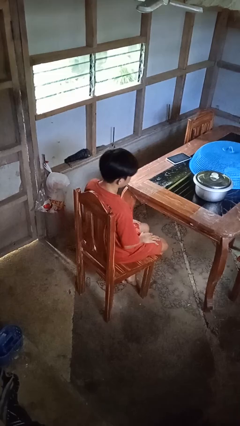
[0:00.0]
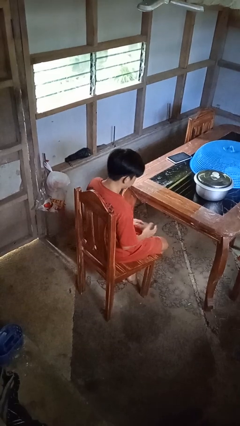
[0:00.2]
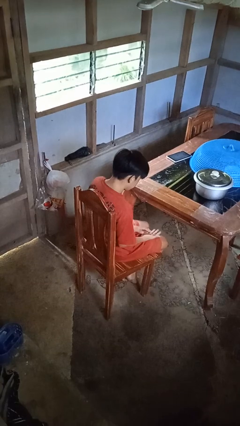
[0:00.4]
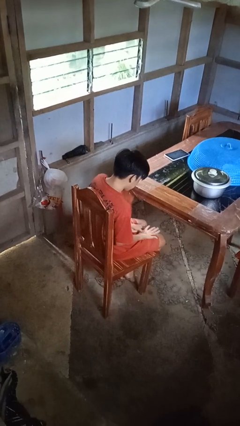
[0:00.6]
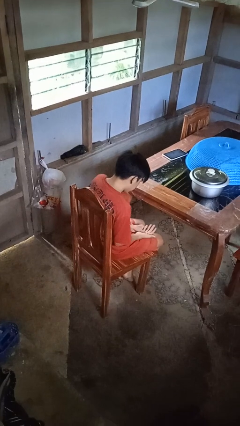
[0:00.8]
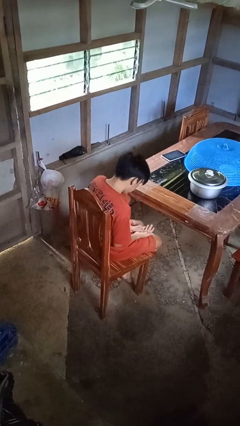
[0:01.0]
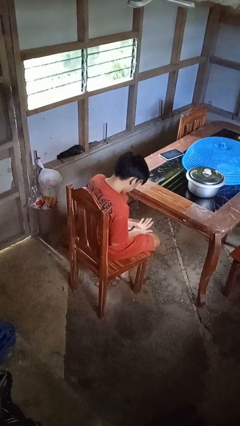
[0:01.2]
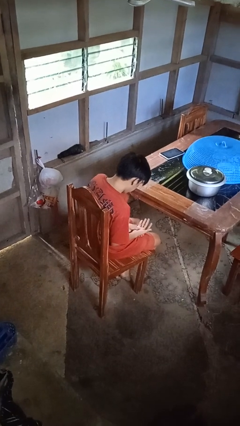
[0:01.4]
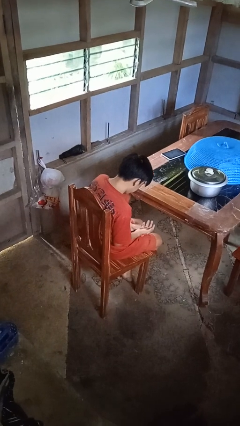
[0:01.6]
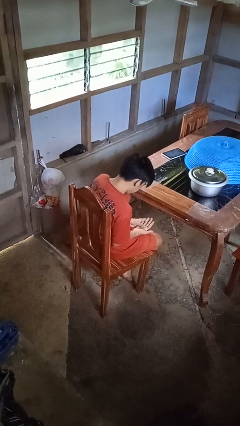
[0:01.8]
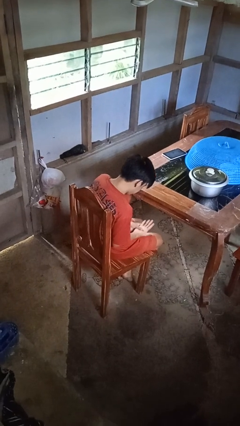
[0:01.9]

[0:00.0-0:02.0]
person looks at hands in lap

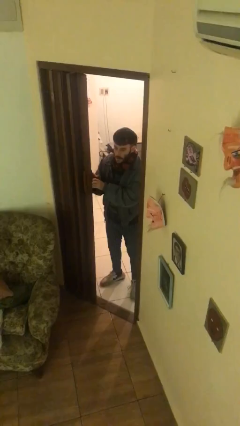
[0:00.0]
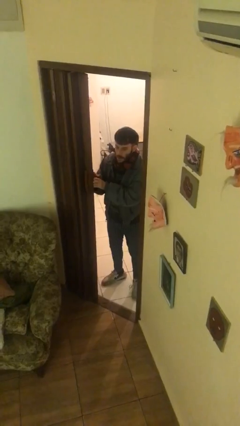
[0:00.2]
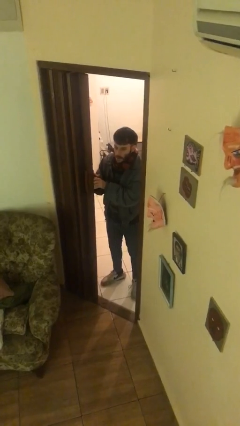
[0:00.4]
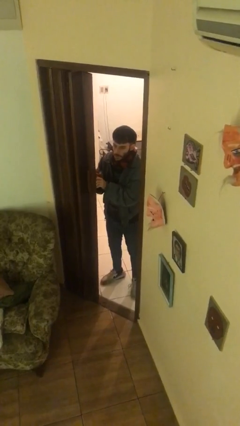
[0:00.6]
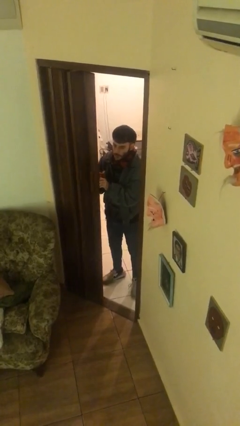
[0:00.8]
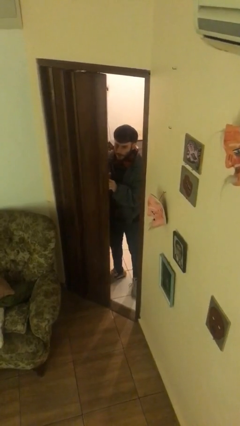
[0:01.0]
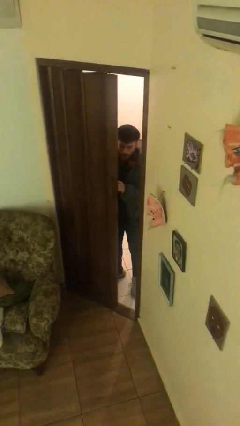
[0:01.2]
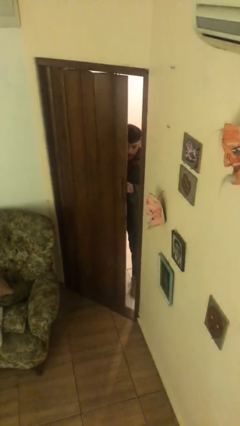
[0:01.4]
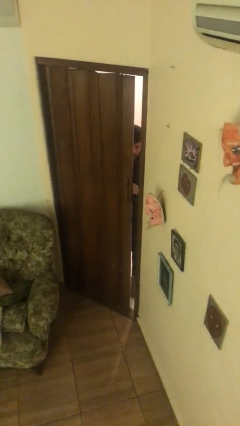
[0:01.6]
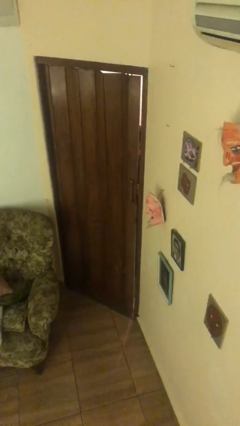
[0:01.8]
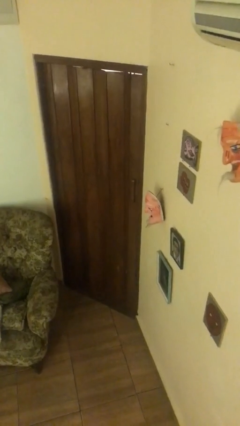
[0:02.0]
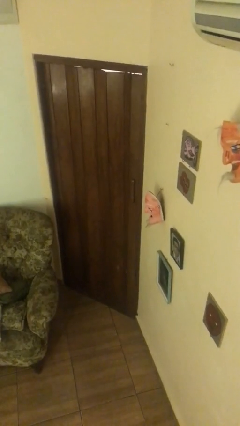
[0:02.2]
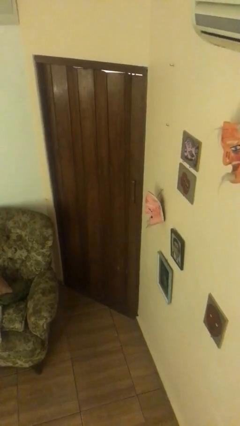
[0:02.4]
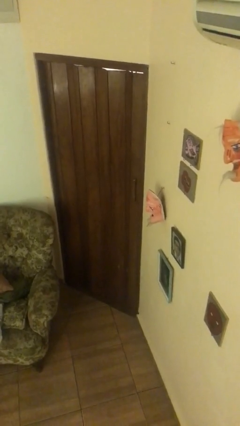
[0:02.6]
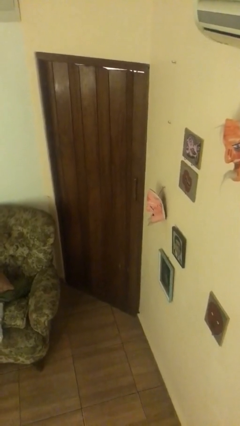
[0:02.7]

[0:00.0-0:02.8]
person closes sliding door

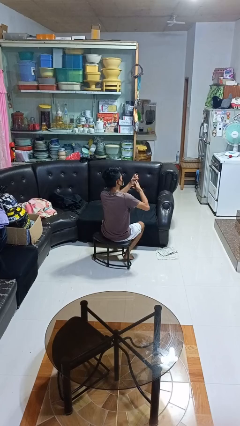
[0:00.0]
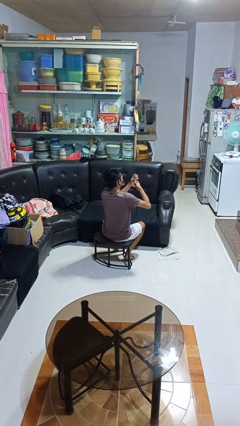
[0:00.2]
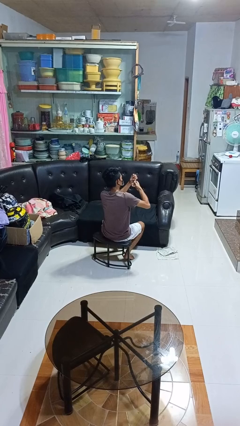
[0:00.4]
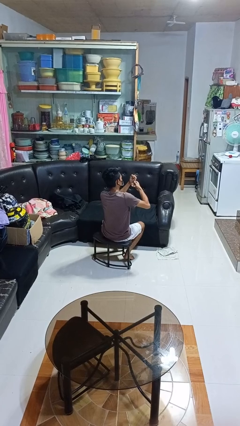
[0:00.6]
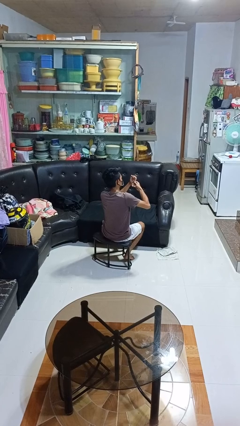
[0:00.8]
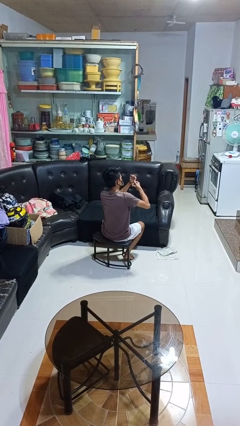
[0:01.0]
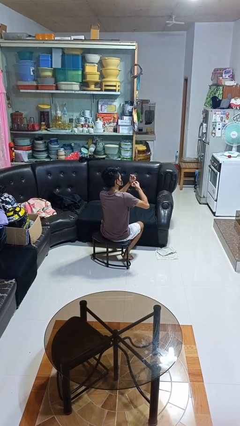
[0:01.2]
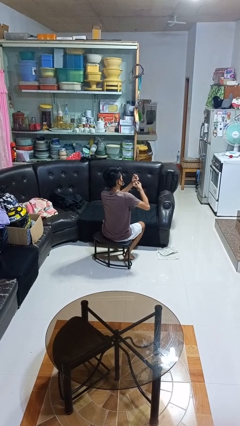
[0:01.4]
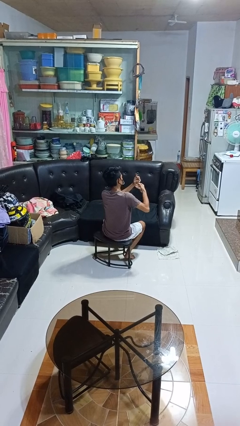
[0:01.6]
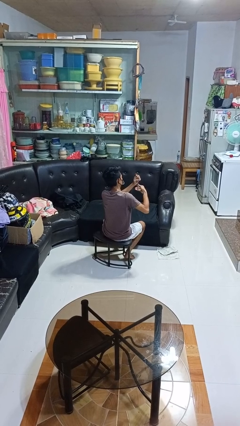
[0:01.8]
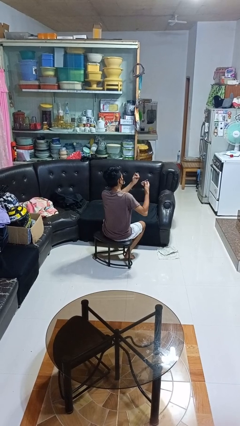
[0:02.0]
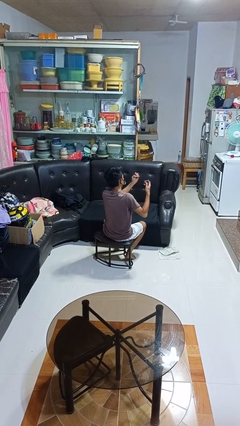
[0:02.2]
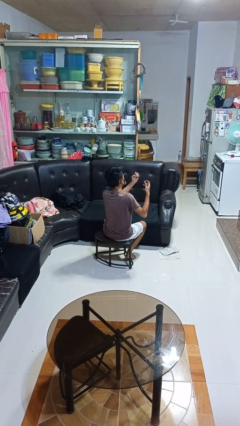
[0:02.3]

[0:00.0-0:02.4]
person clips fingernails

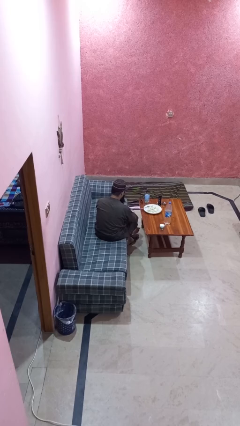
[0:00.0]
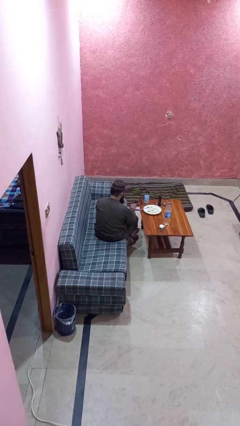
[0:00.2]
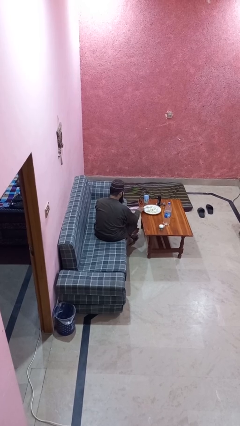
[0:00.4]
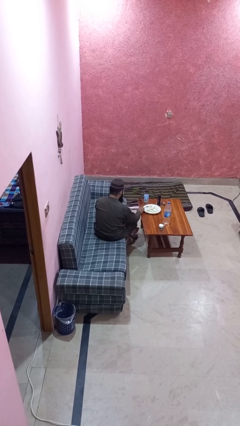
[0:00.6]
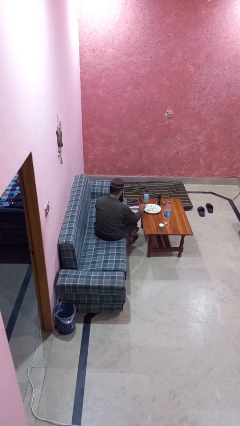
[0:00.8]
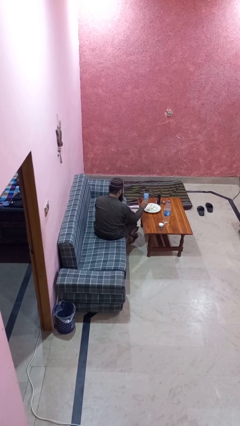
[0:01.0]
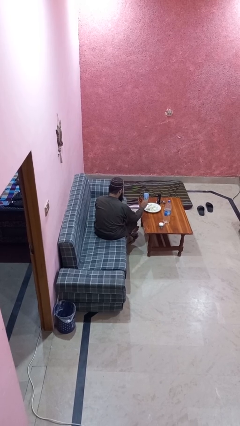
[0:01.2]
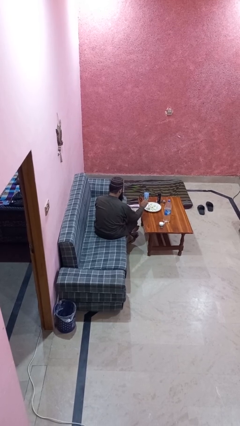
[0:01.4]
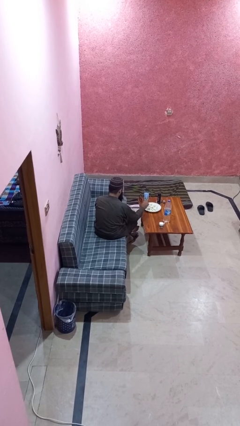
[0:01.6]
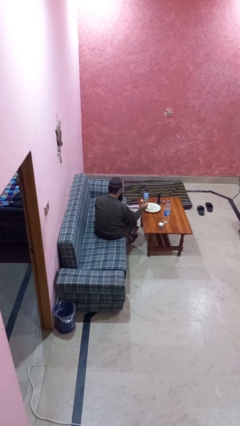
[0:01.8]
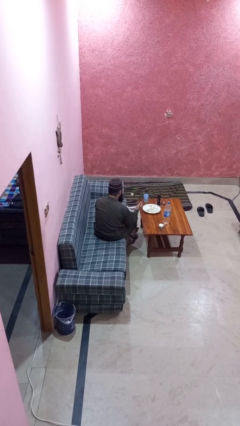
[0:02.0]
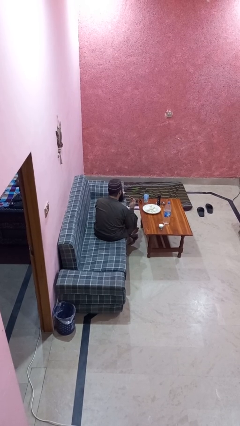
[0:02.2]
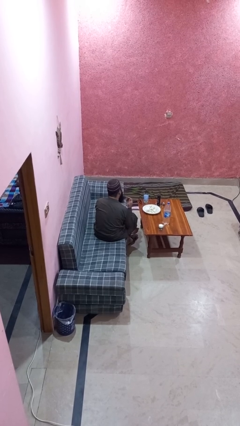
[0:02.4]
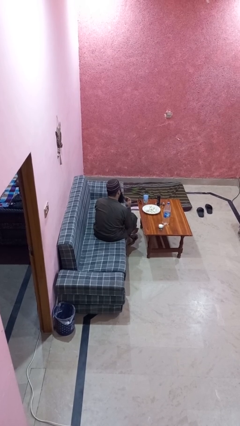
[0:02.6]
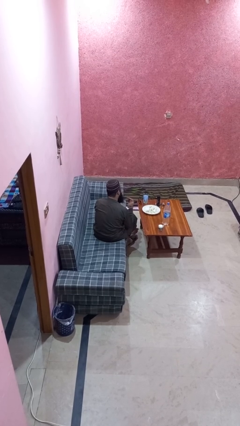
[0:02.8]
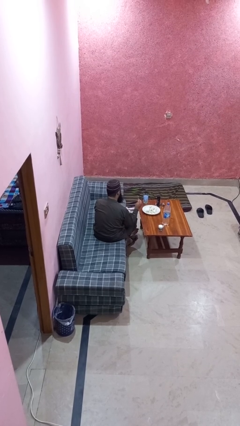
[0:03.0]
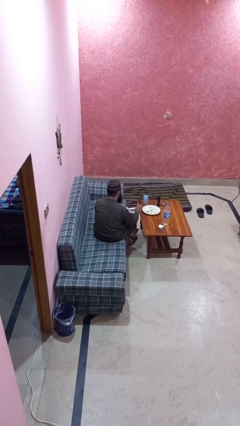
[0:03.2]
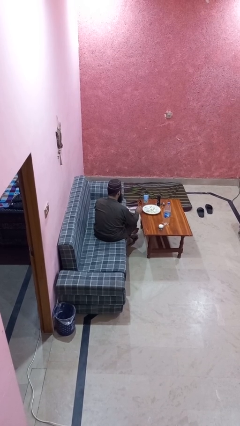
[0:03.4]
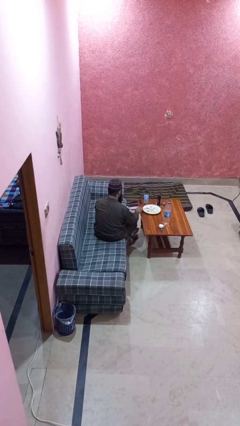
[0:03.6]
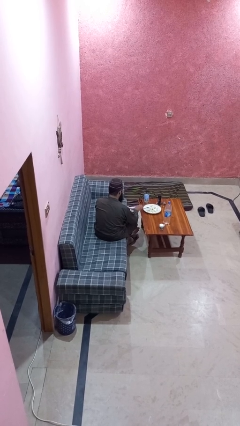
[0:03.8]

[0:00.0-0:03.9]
person eats with utensil

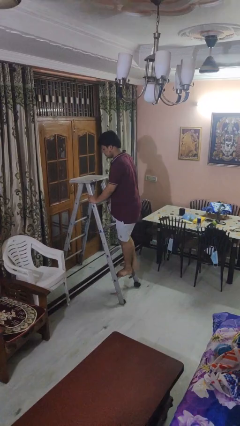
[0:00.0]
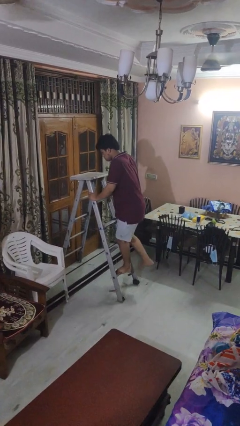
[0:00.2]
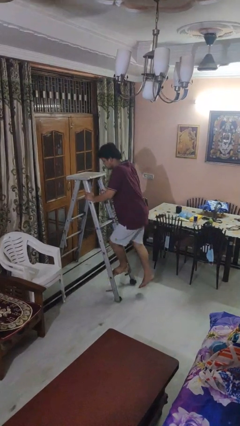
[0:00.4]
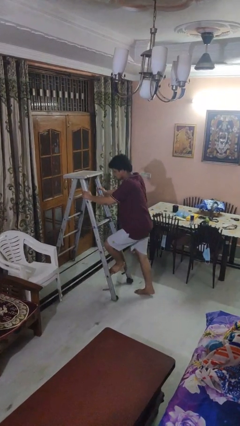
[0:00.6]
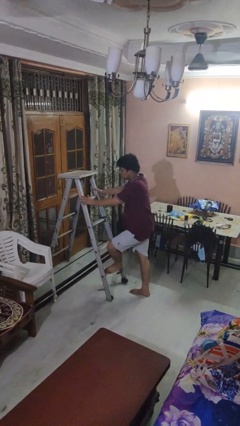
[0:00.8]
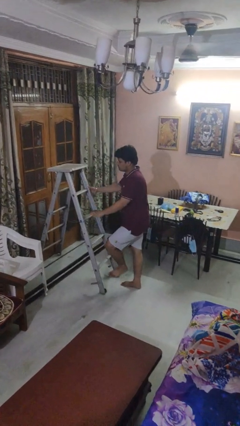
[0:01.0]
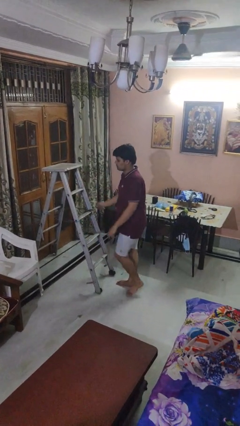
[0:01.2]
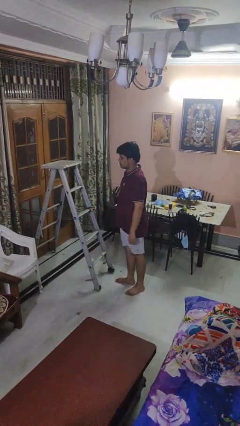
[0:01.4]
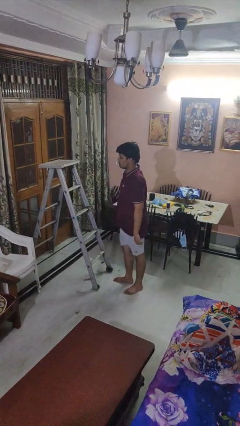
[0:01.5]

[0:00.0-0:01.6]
person climbs down ladder

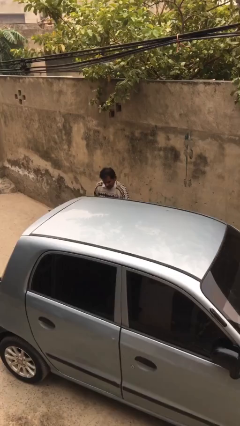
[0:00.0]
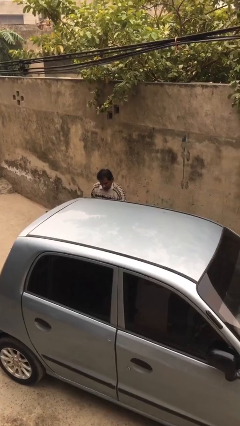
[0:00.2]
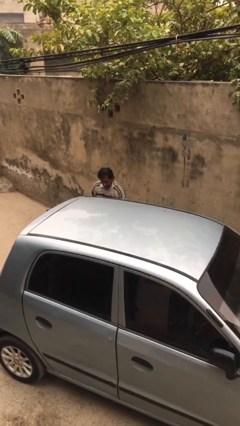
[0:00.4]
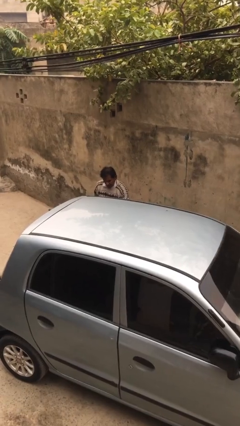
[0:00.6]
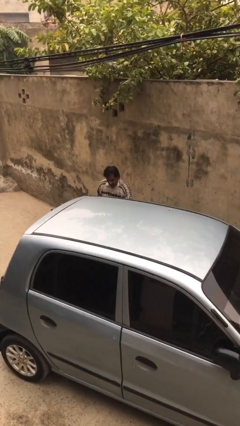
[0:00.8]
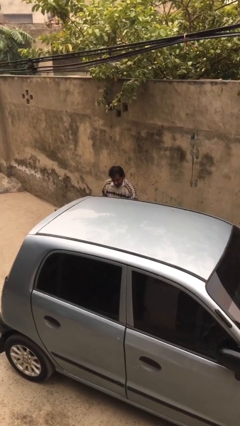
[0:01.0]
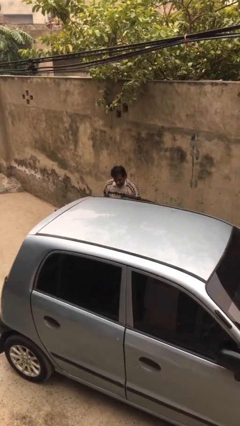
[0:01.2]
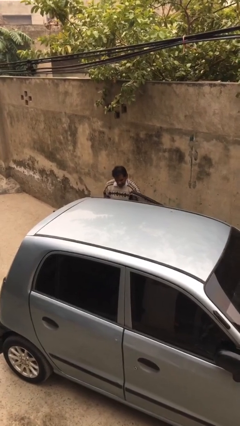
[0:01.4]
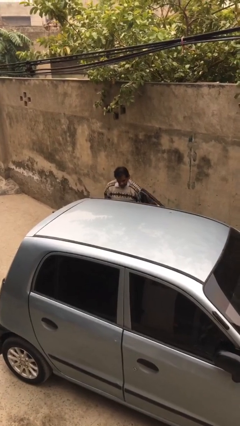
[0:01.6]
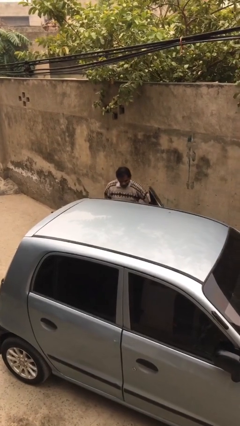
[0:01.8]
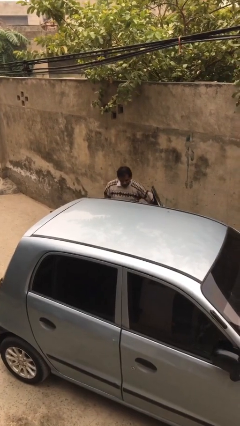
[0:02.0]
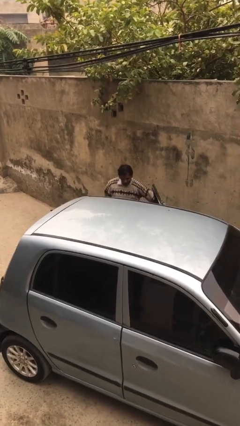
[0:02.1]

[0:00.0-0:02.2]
person opens car door

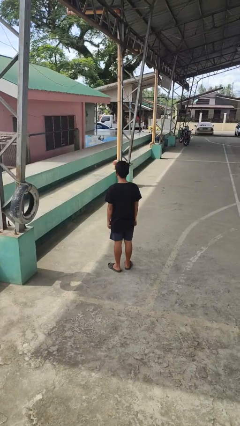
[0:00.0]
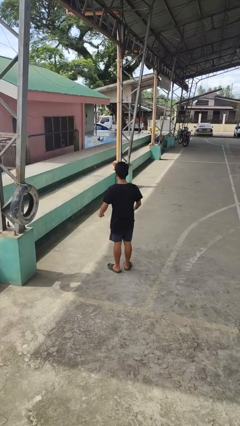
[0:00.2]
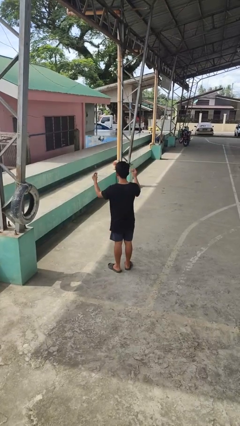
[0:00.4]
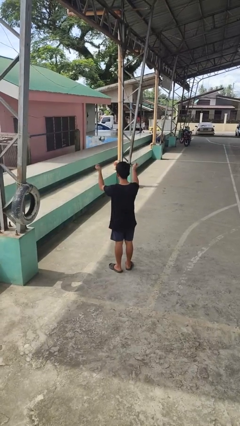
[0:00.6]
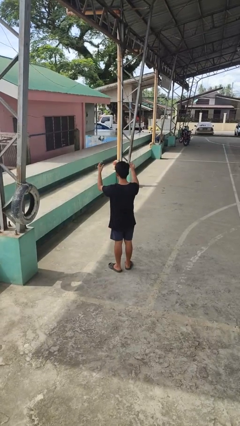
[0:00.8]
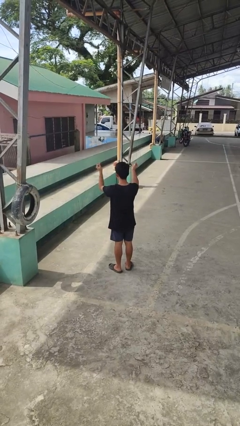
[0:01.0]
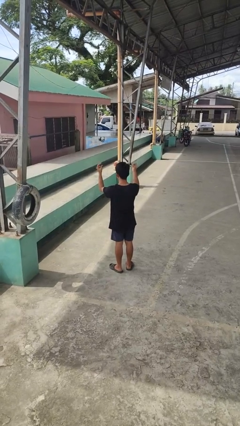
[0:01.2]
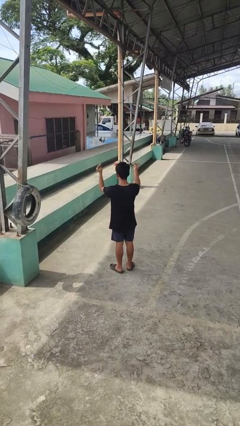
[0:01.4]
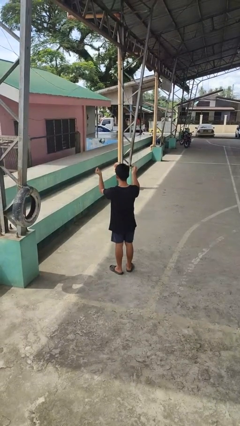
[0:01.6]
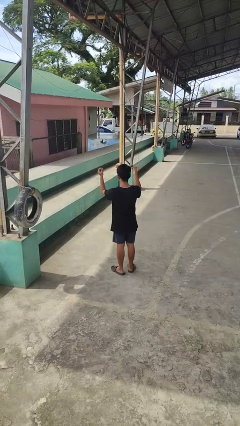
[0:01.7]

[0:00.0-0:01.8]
person snaps fingers

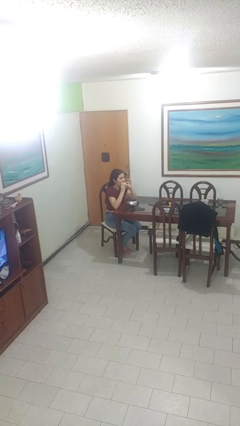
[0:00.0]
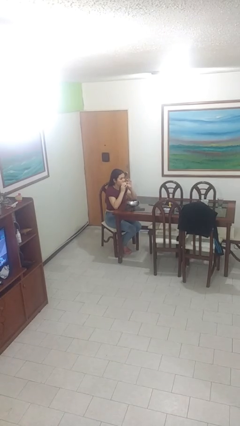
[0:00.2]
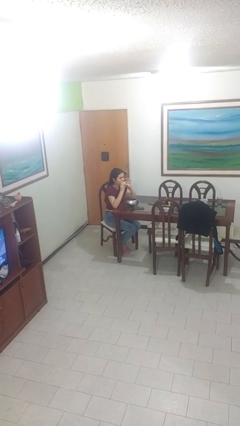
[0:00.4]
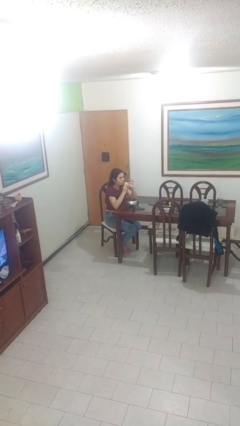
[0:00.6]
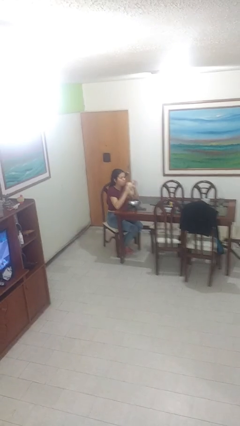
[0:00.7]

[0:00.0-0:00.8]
person eats with hands
